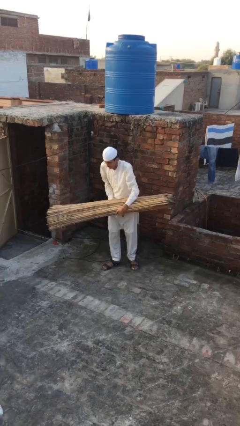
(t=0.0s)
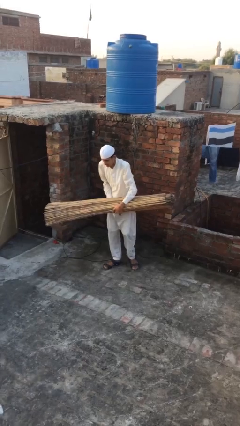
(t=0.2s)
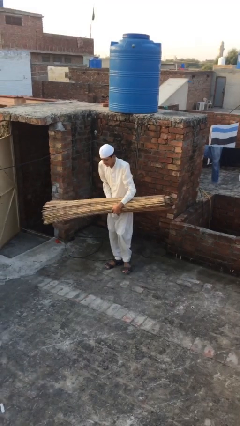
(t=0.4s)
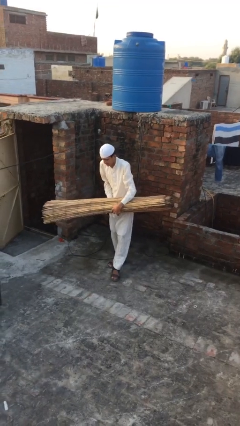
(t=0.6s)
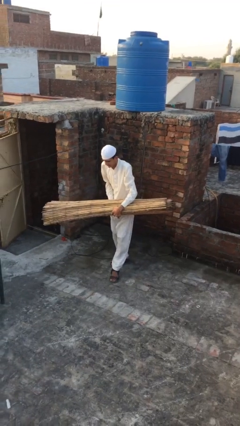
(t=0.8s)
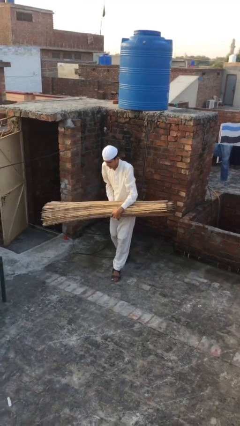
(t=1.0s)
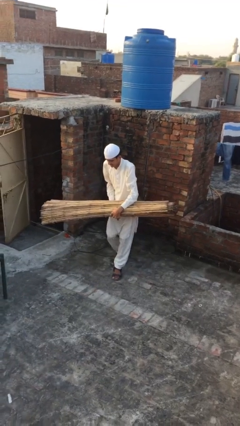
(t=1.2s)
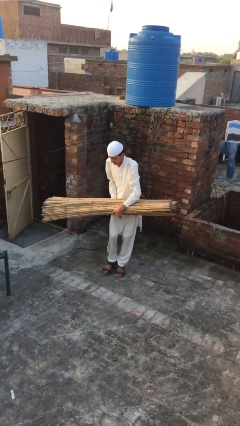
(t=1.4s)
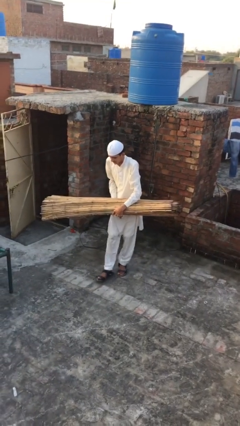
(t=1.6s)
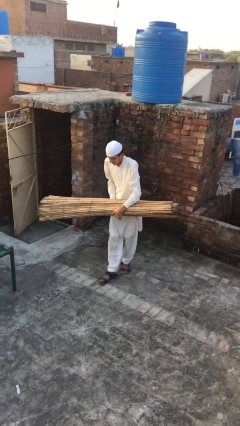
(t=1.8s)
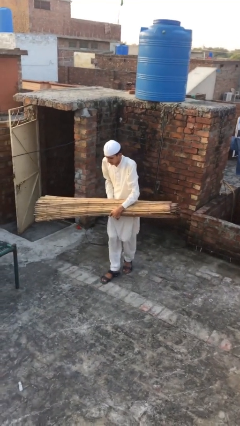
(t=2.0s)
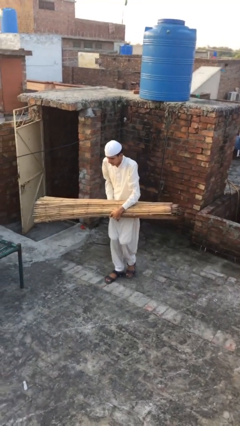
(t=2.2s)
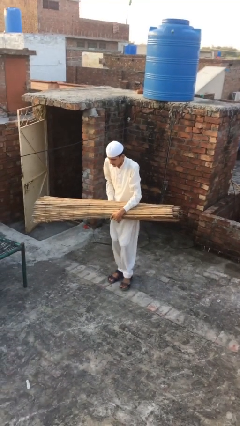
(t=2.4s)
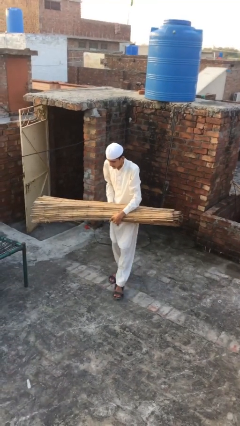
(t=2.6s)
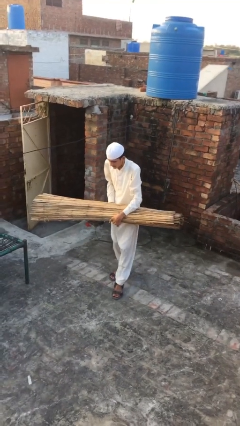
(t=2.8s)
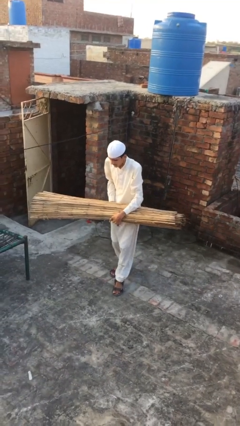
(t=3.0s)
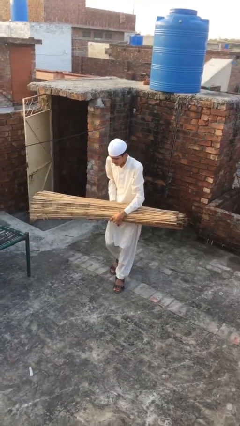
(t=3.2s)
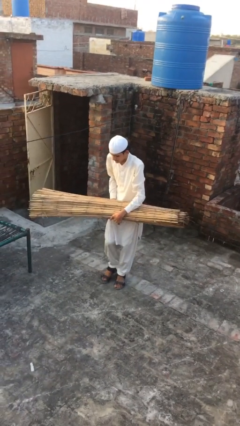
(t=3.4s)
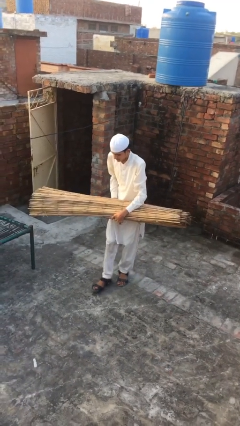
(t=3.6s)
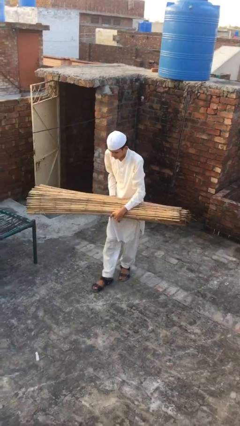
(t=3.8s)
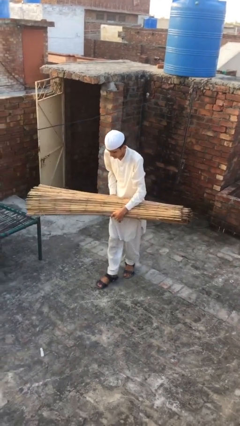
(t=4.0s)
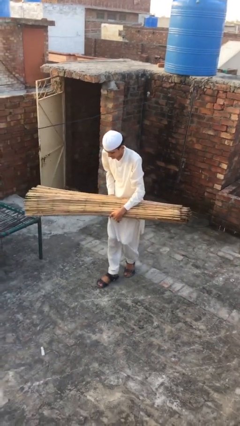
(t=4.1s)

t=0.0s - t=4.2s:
person carries heavy object

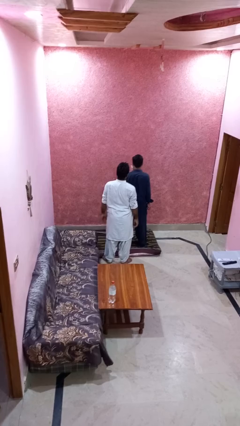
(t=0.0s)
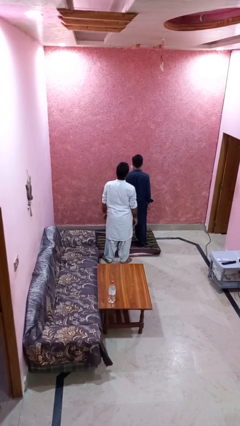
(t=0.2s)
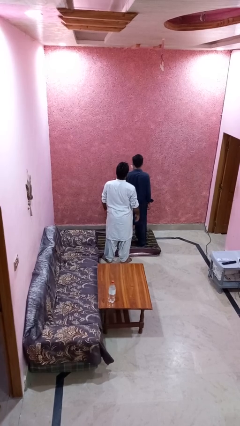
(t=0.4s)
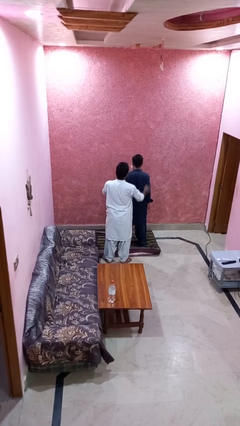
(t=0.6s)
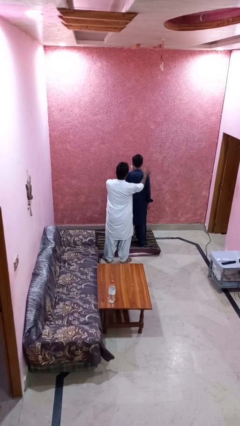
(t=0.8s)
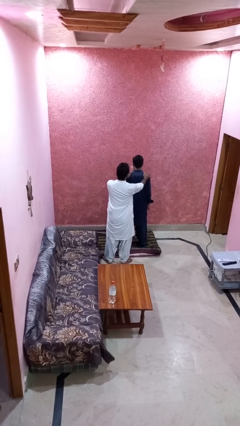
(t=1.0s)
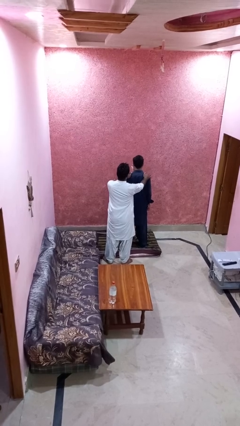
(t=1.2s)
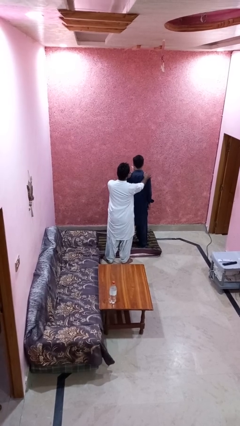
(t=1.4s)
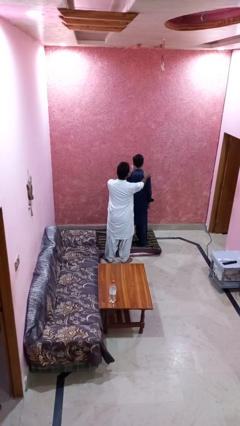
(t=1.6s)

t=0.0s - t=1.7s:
person grabs person by shoulder

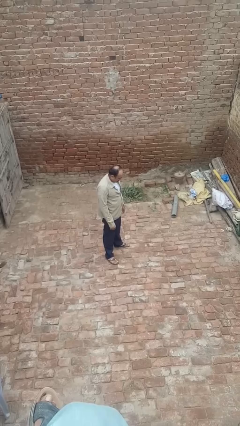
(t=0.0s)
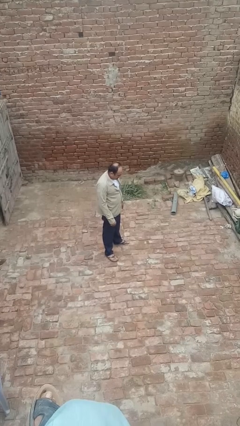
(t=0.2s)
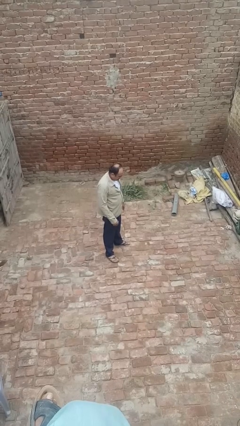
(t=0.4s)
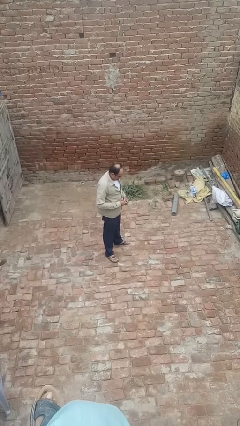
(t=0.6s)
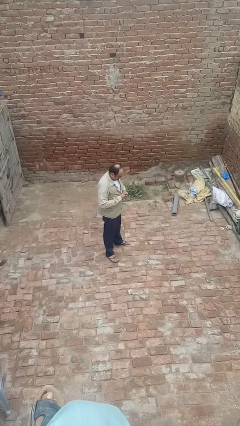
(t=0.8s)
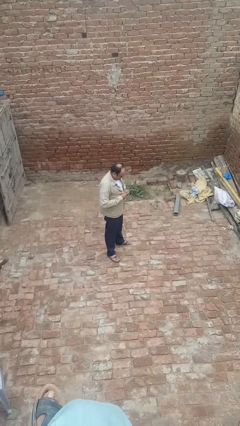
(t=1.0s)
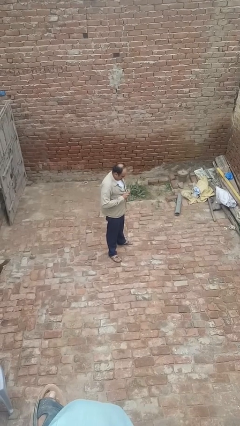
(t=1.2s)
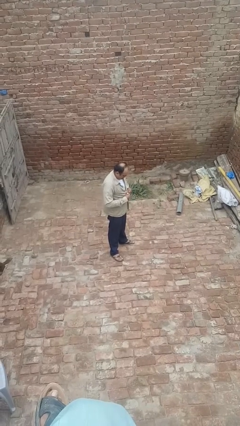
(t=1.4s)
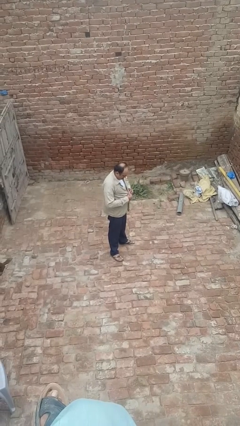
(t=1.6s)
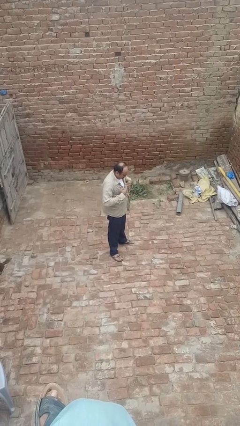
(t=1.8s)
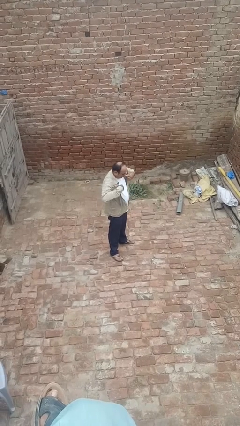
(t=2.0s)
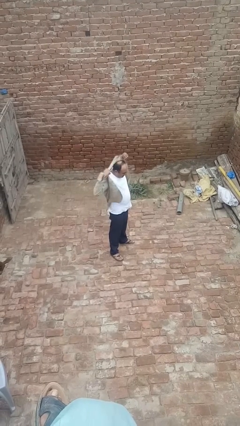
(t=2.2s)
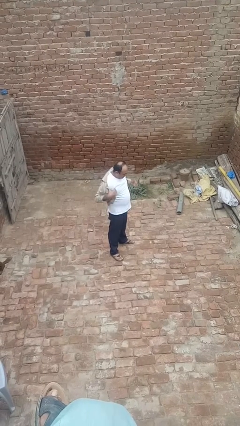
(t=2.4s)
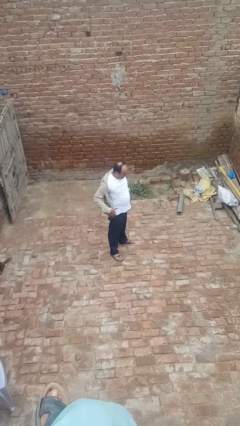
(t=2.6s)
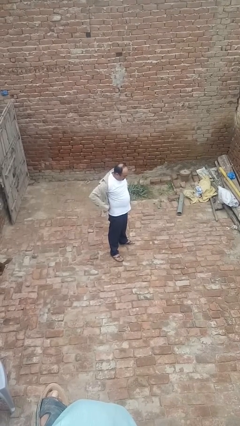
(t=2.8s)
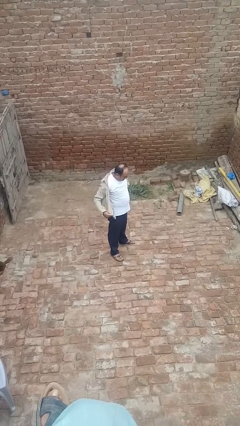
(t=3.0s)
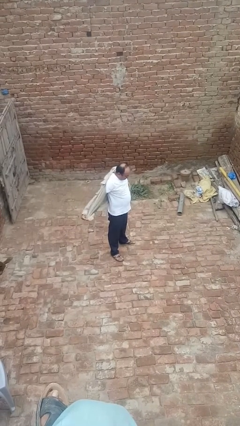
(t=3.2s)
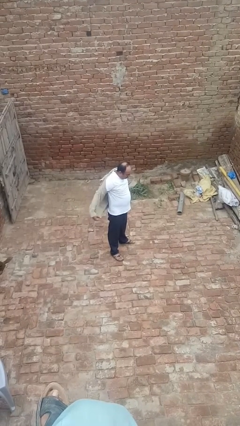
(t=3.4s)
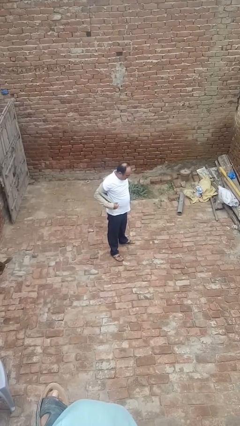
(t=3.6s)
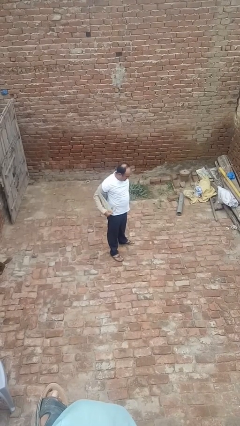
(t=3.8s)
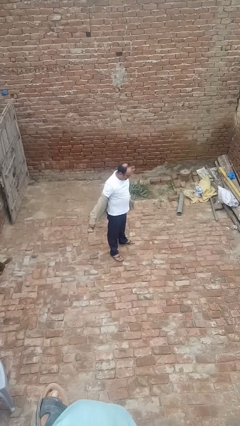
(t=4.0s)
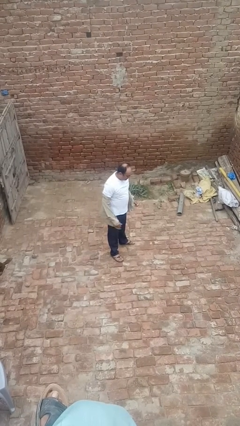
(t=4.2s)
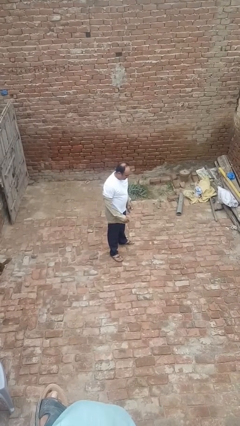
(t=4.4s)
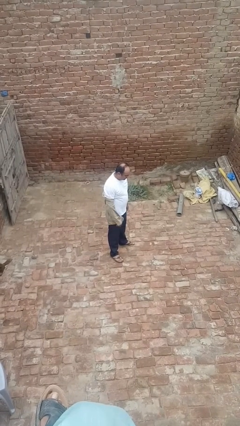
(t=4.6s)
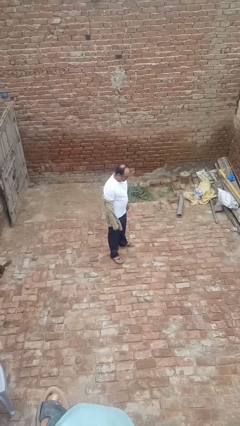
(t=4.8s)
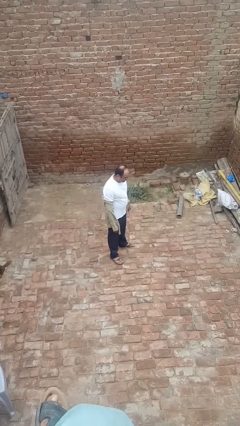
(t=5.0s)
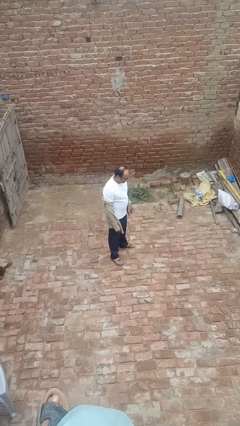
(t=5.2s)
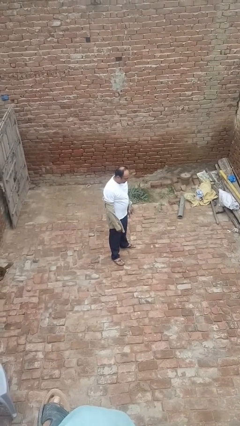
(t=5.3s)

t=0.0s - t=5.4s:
person takes off shirt

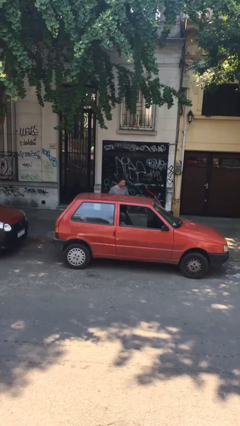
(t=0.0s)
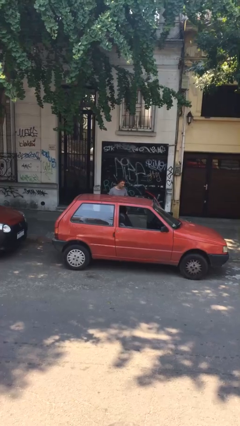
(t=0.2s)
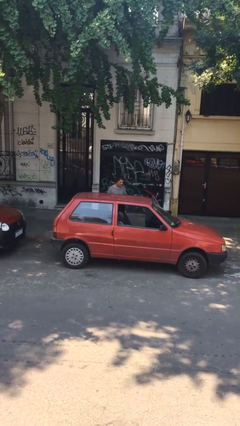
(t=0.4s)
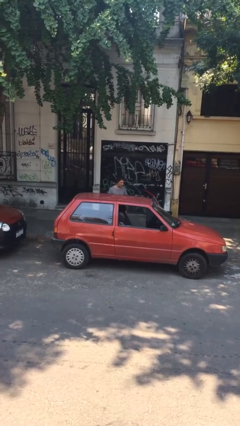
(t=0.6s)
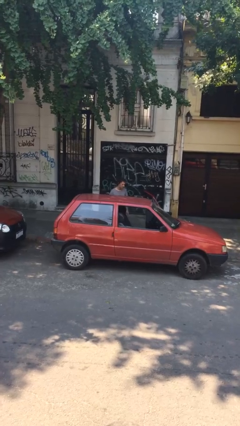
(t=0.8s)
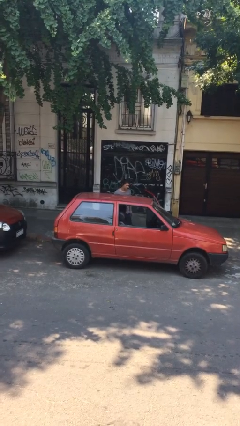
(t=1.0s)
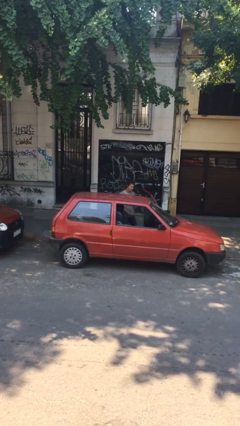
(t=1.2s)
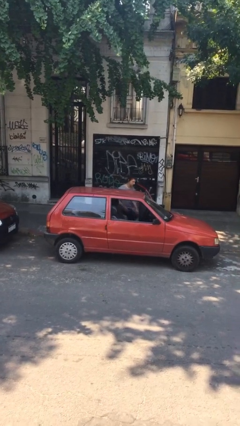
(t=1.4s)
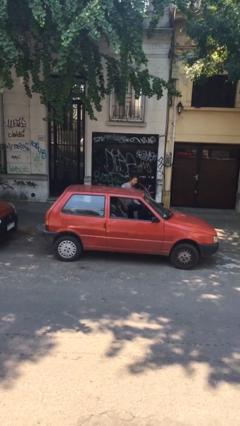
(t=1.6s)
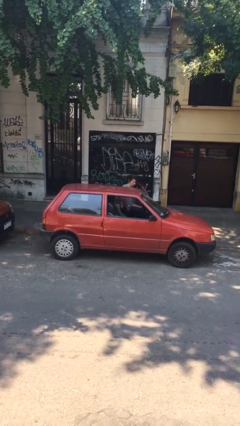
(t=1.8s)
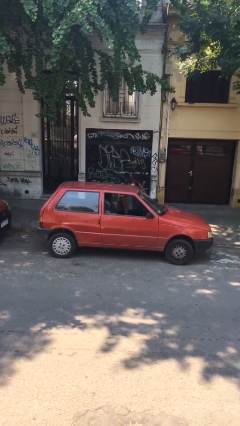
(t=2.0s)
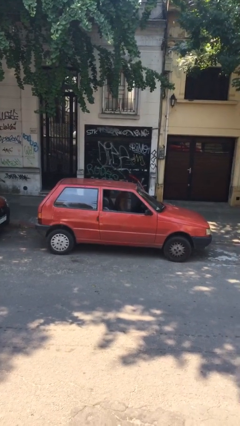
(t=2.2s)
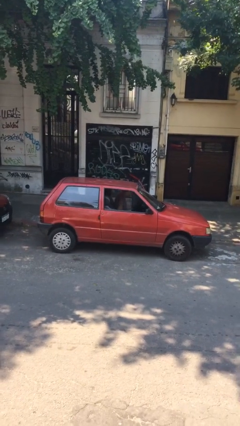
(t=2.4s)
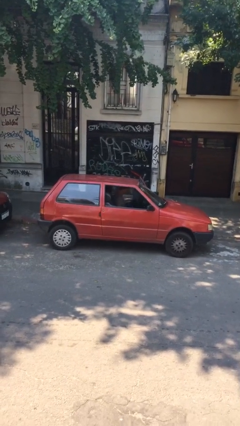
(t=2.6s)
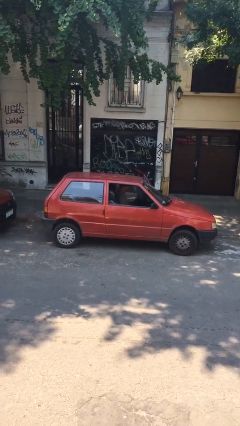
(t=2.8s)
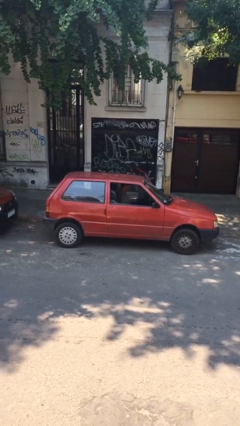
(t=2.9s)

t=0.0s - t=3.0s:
person enters car

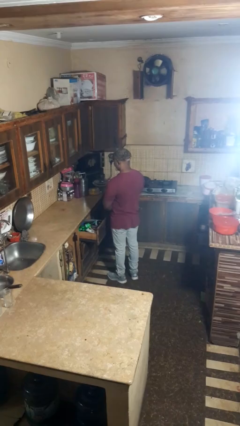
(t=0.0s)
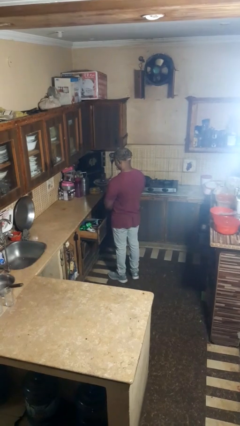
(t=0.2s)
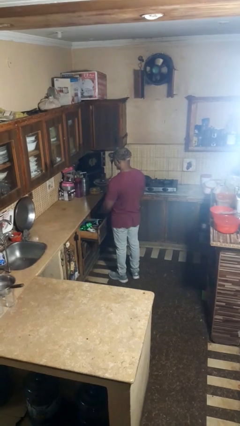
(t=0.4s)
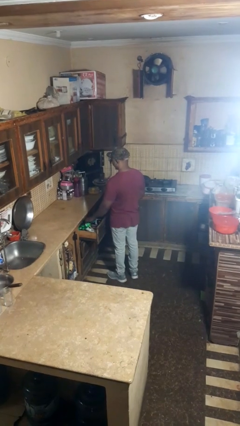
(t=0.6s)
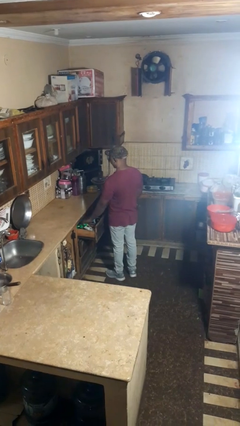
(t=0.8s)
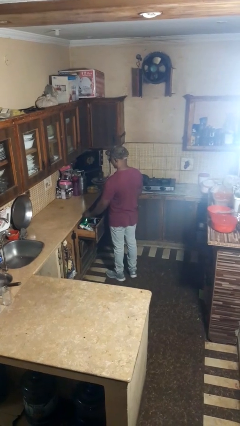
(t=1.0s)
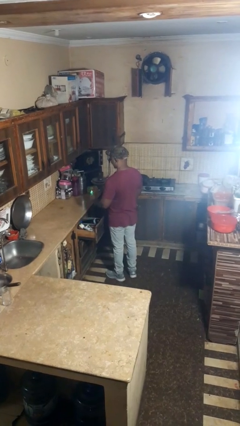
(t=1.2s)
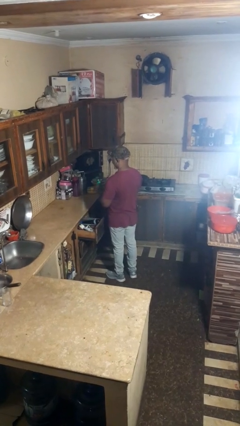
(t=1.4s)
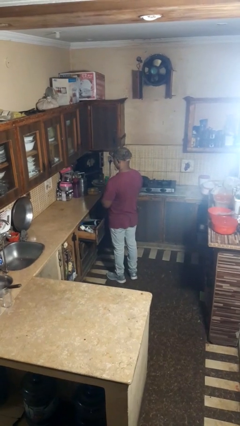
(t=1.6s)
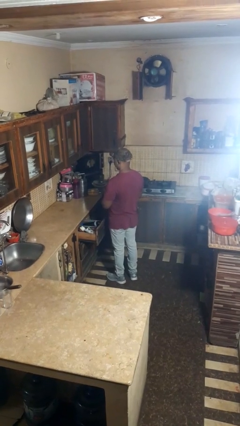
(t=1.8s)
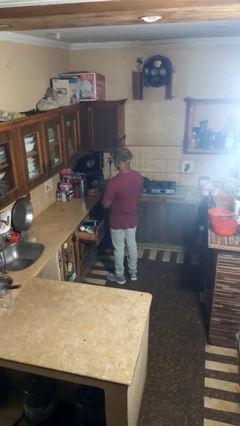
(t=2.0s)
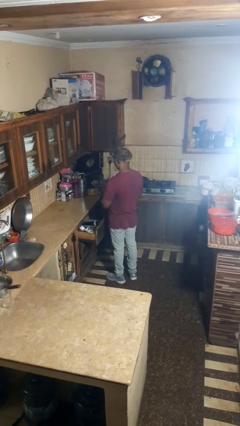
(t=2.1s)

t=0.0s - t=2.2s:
person takes object from kitchen drawer

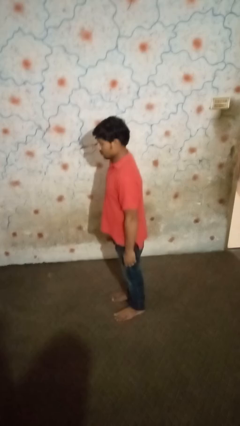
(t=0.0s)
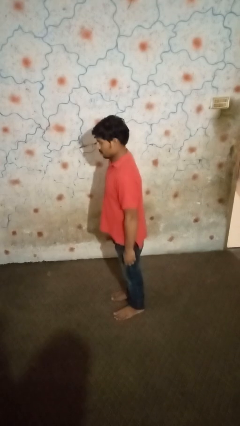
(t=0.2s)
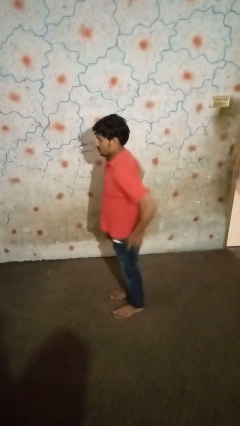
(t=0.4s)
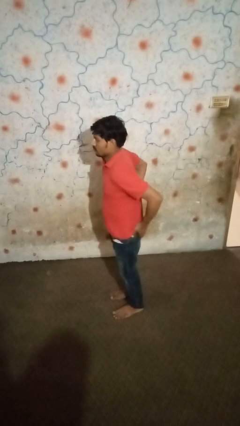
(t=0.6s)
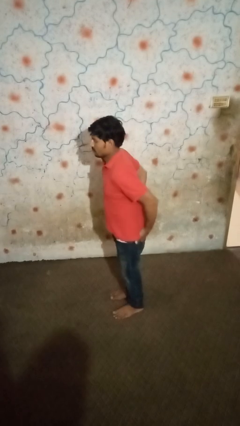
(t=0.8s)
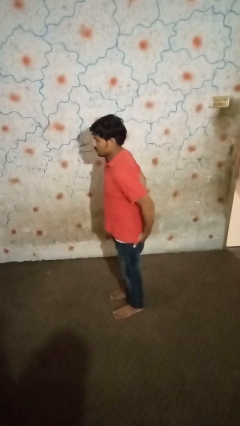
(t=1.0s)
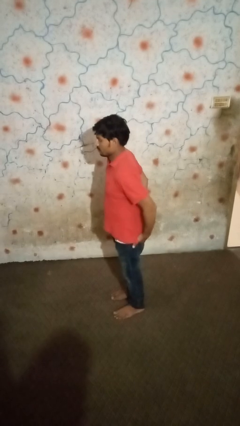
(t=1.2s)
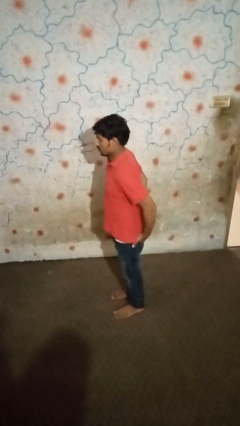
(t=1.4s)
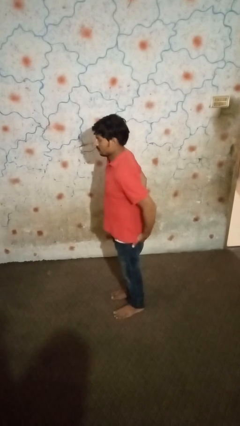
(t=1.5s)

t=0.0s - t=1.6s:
person puts hands in back pockets
